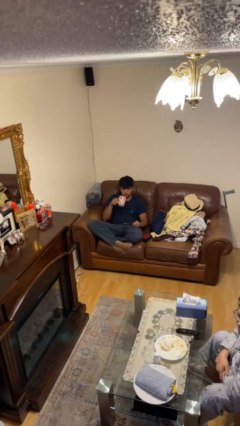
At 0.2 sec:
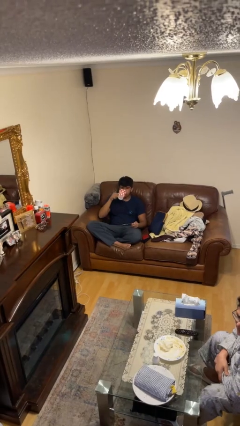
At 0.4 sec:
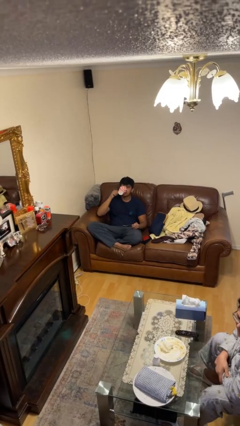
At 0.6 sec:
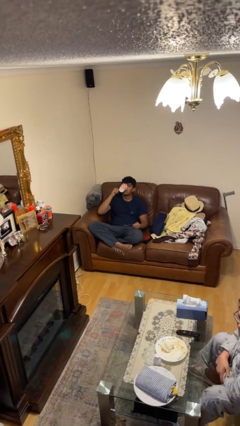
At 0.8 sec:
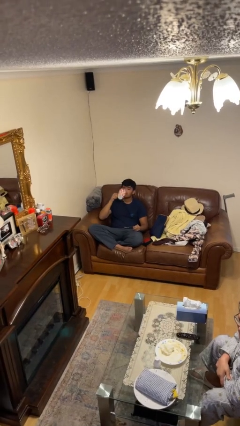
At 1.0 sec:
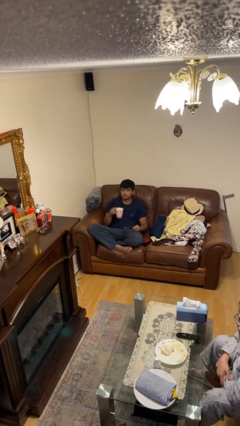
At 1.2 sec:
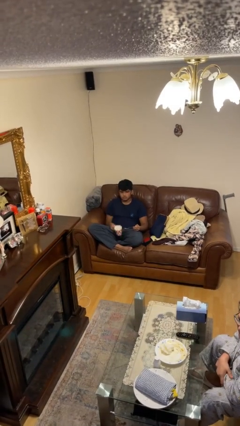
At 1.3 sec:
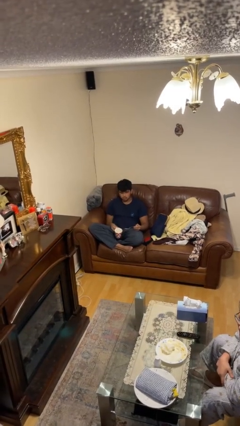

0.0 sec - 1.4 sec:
person drinks from mug

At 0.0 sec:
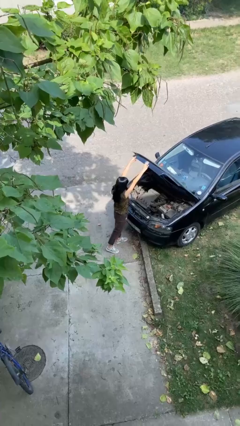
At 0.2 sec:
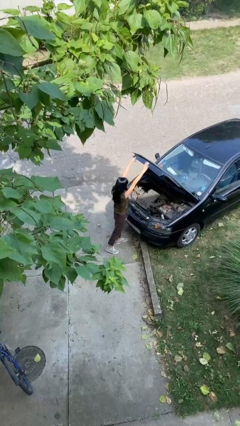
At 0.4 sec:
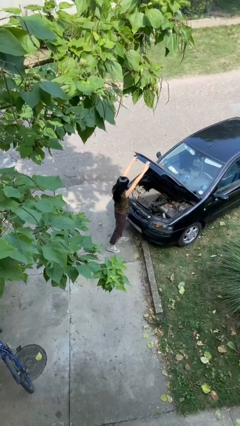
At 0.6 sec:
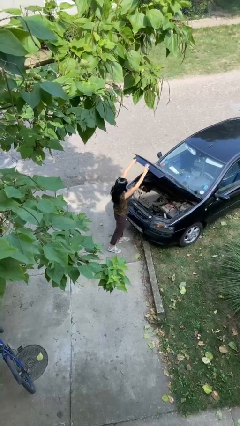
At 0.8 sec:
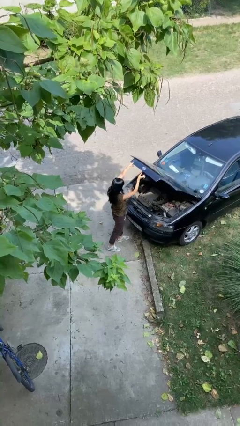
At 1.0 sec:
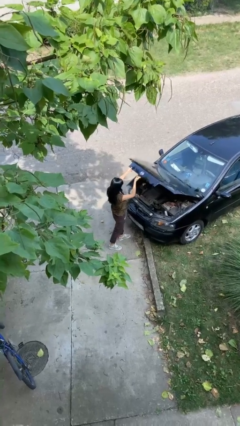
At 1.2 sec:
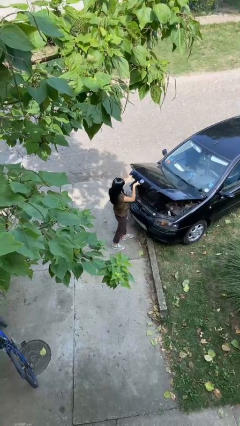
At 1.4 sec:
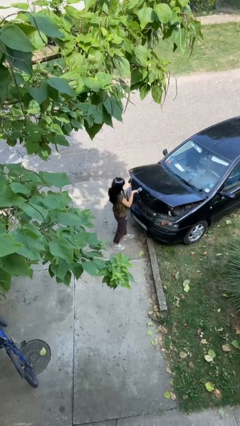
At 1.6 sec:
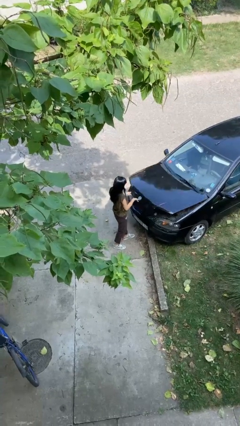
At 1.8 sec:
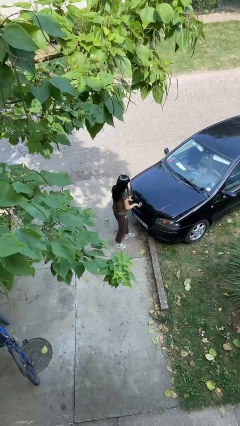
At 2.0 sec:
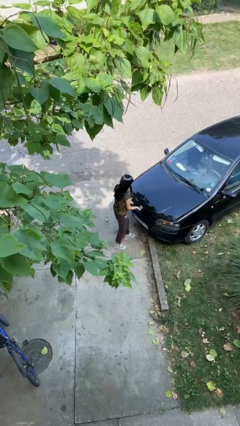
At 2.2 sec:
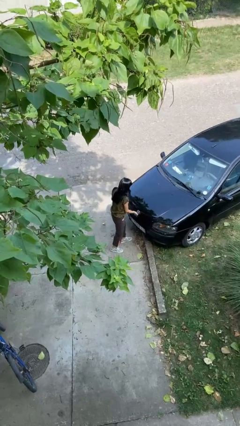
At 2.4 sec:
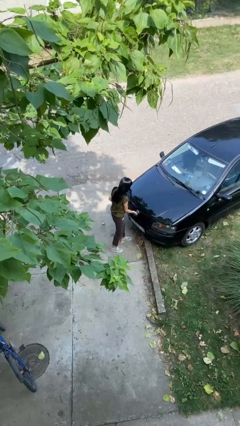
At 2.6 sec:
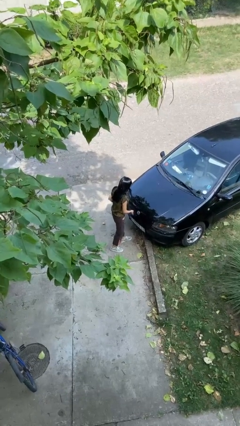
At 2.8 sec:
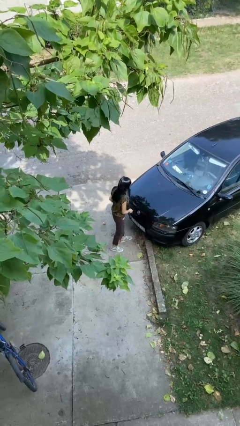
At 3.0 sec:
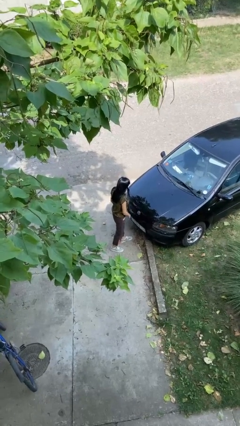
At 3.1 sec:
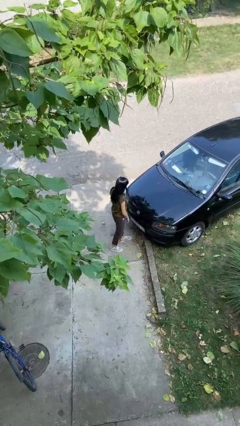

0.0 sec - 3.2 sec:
person closes car hood

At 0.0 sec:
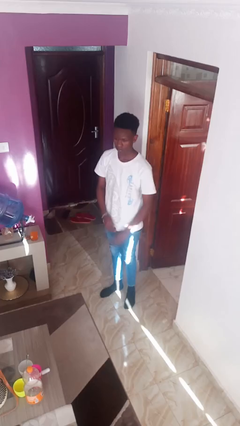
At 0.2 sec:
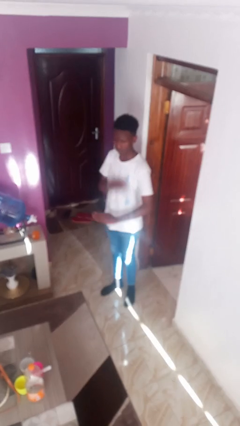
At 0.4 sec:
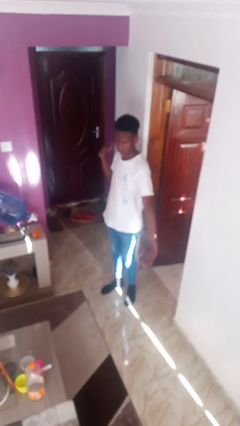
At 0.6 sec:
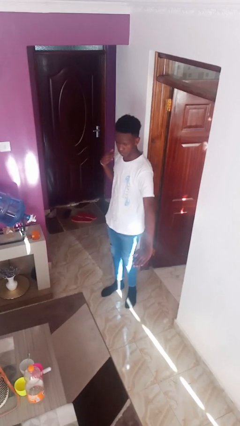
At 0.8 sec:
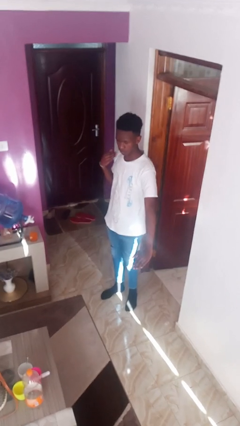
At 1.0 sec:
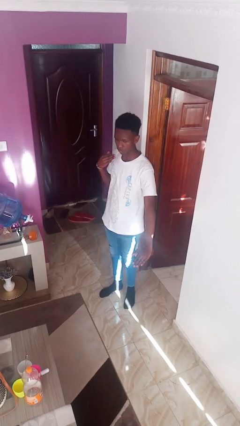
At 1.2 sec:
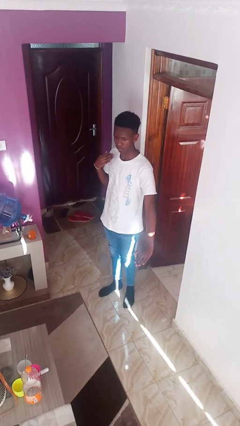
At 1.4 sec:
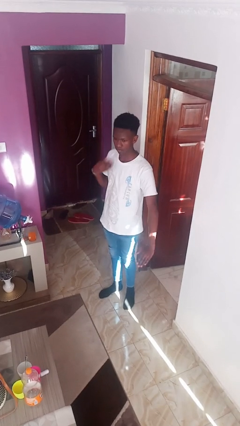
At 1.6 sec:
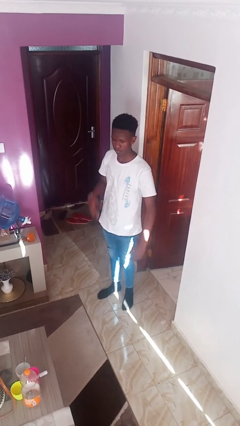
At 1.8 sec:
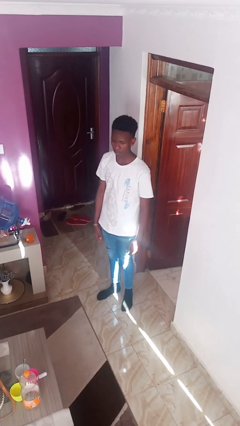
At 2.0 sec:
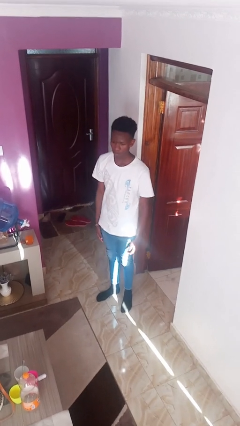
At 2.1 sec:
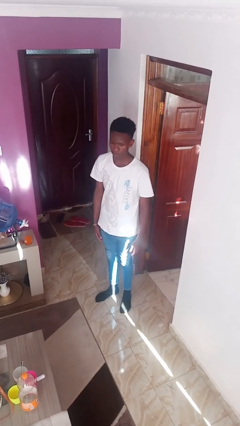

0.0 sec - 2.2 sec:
person karate chop

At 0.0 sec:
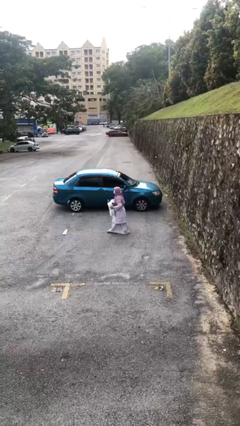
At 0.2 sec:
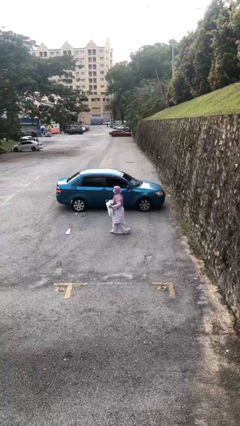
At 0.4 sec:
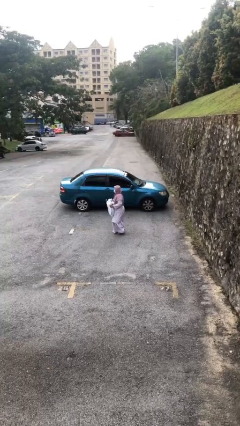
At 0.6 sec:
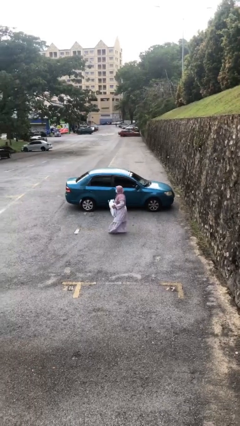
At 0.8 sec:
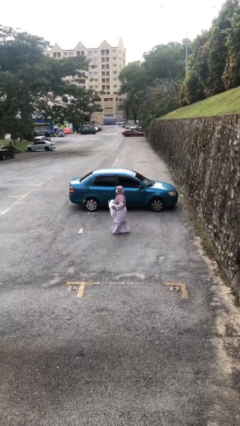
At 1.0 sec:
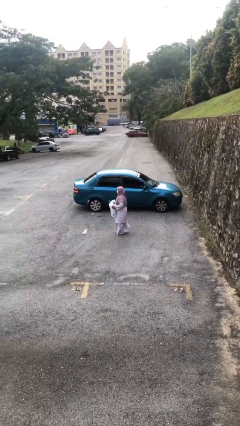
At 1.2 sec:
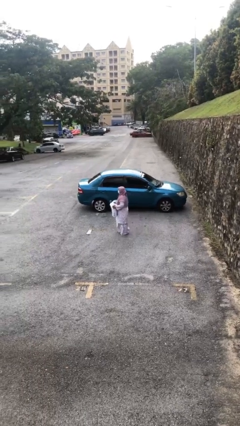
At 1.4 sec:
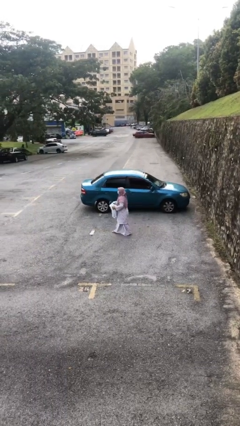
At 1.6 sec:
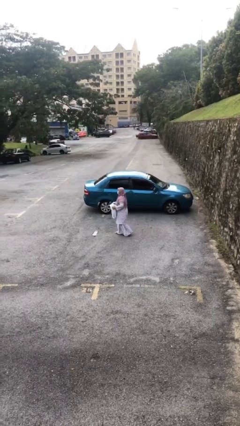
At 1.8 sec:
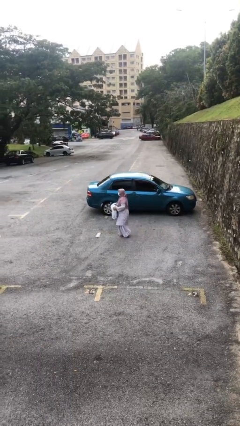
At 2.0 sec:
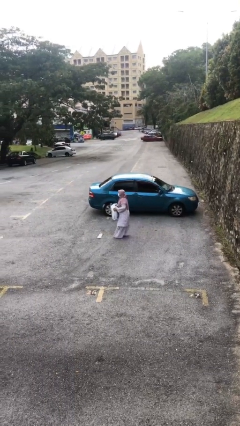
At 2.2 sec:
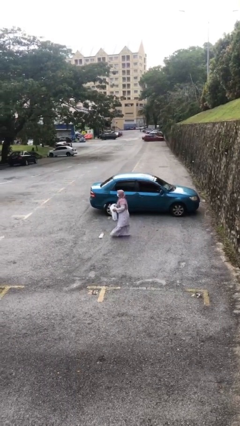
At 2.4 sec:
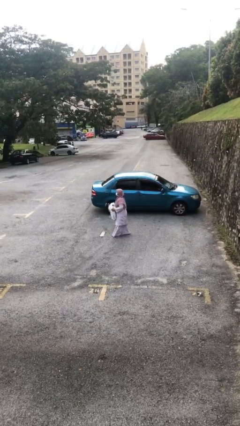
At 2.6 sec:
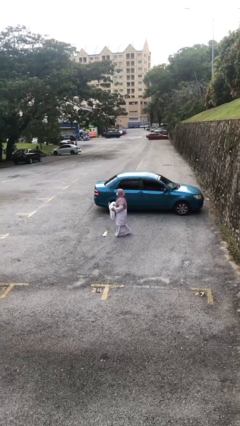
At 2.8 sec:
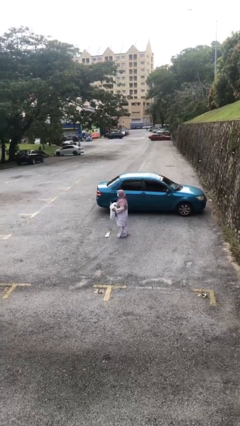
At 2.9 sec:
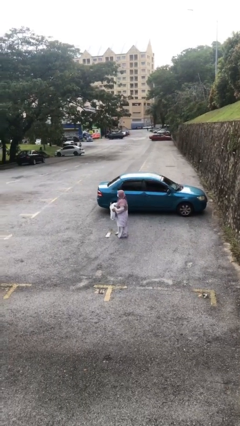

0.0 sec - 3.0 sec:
person carries heavy object

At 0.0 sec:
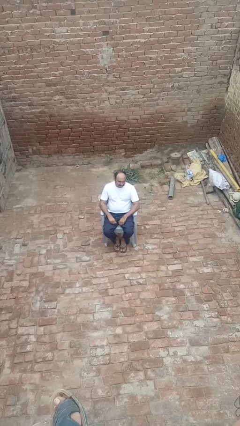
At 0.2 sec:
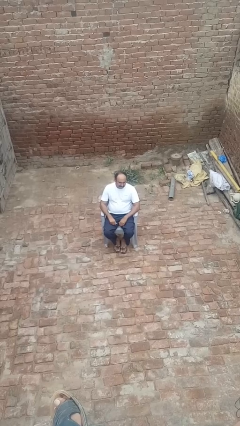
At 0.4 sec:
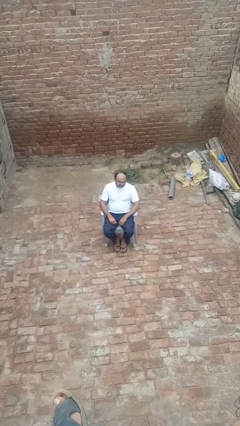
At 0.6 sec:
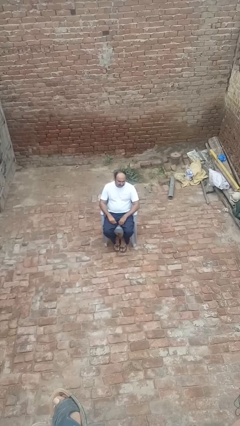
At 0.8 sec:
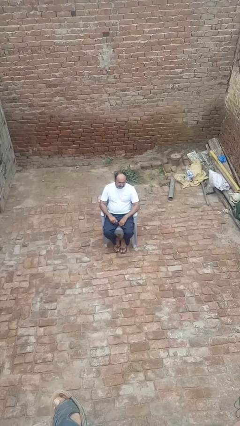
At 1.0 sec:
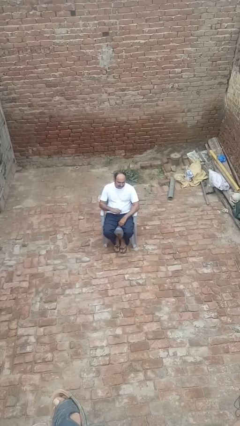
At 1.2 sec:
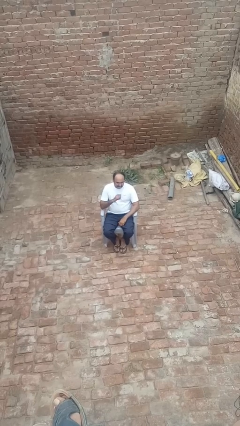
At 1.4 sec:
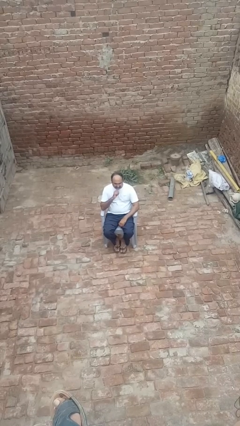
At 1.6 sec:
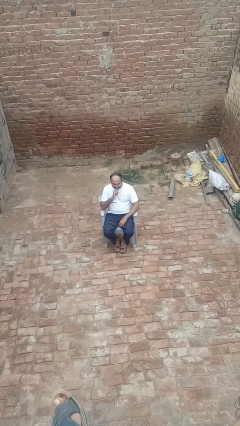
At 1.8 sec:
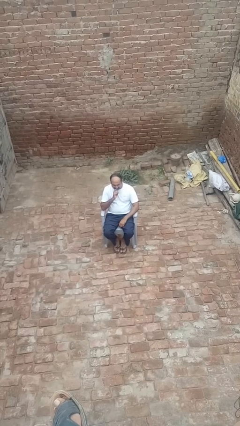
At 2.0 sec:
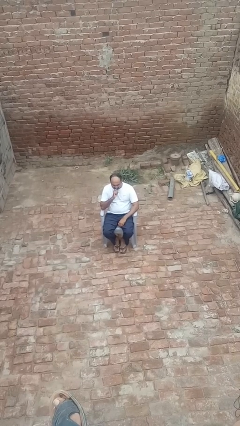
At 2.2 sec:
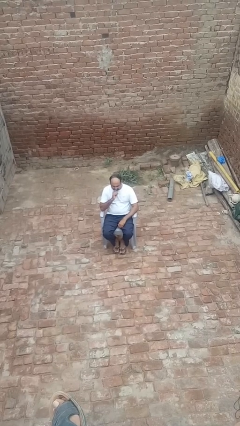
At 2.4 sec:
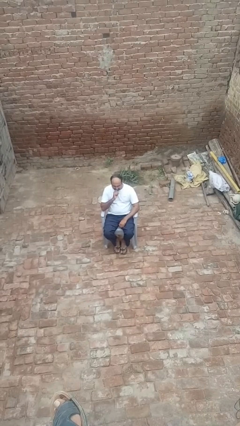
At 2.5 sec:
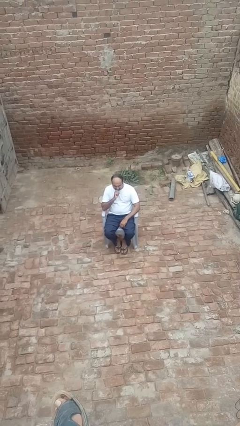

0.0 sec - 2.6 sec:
person strokes chin

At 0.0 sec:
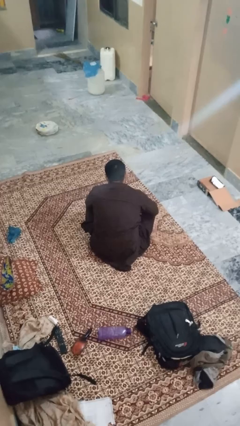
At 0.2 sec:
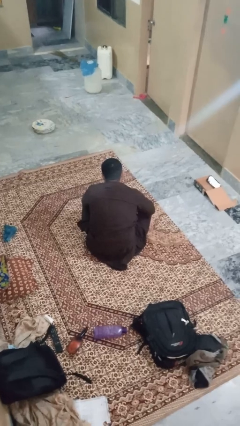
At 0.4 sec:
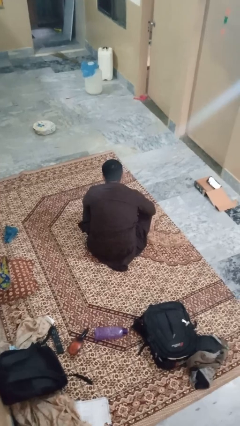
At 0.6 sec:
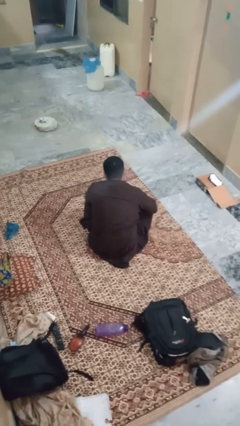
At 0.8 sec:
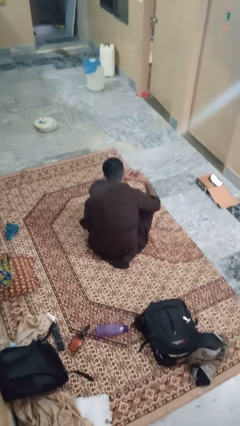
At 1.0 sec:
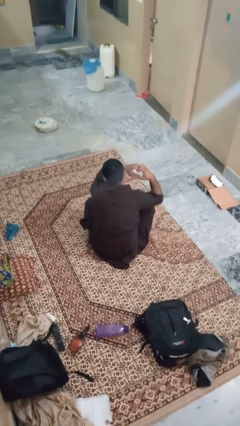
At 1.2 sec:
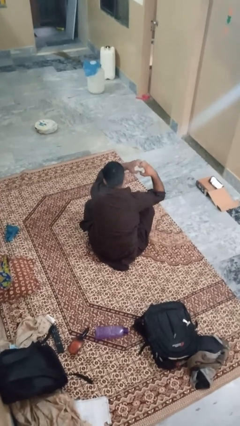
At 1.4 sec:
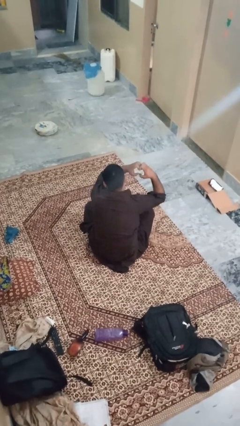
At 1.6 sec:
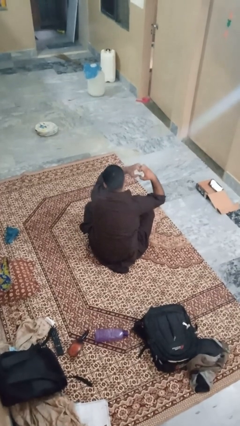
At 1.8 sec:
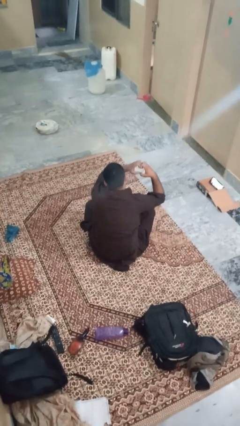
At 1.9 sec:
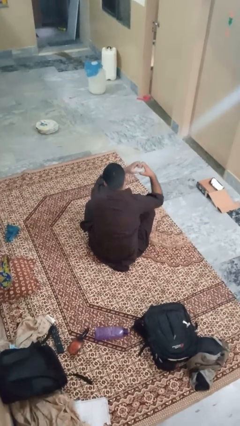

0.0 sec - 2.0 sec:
person gestures heart

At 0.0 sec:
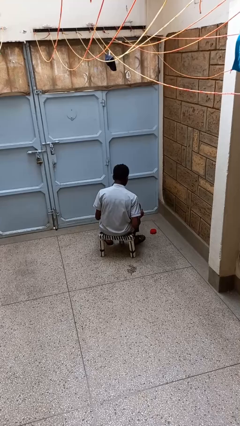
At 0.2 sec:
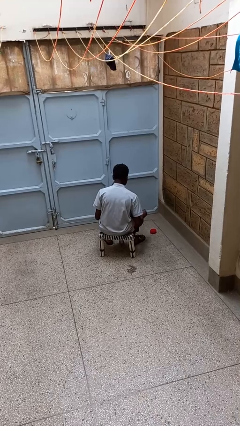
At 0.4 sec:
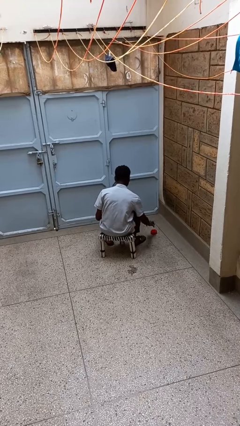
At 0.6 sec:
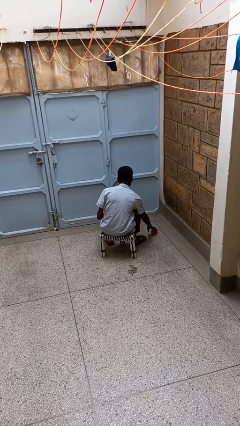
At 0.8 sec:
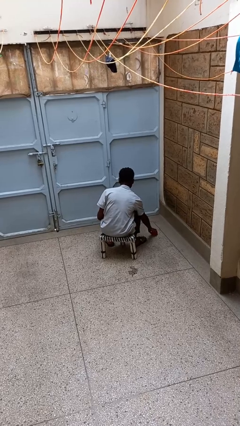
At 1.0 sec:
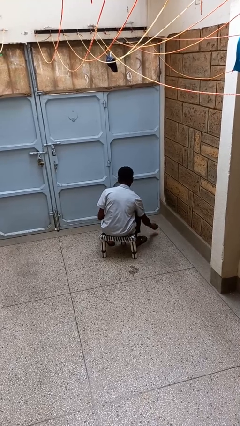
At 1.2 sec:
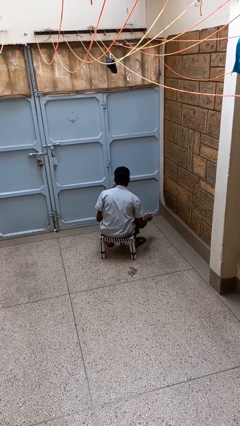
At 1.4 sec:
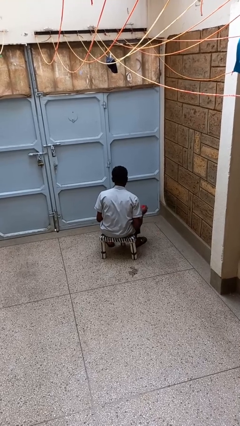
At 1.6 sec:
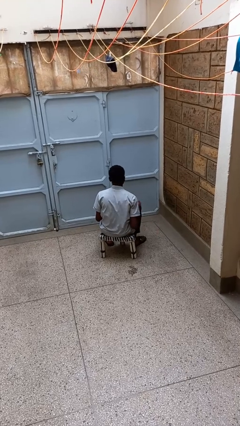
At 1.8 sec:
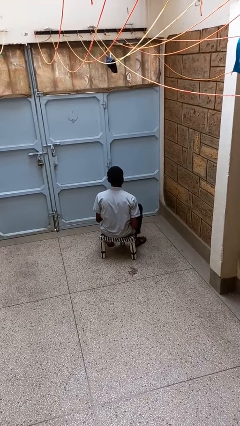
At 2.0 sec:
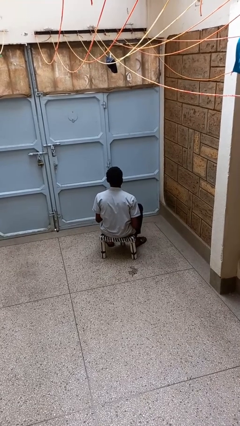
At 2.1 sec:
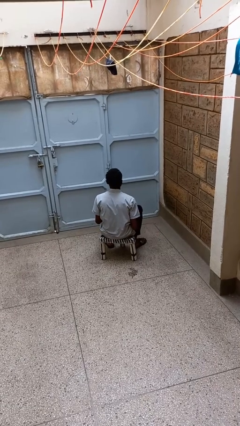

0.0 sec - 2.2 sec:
person picks up object from floor

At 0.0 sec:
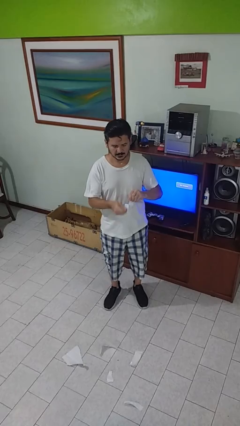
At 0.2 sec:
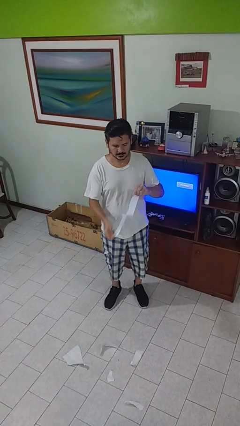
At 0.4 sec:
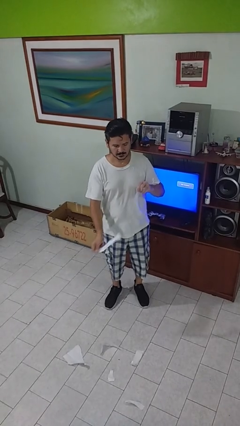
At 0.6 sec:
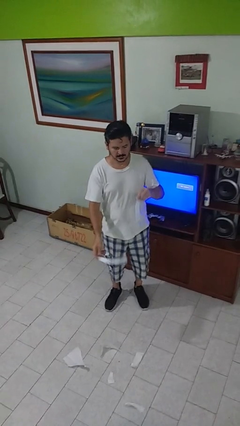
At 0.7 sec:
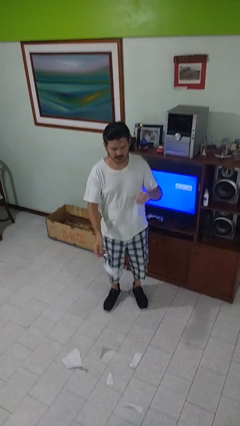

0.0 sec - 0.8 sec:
person tears paper
